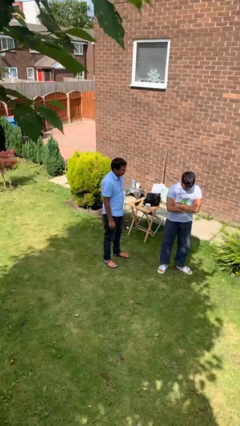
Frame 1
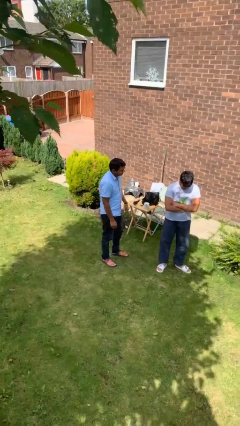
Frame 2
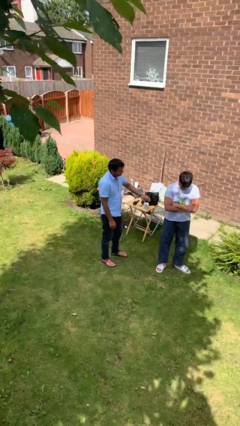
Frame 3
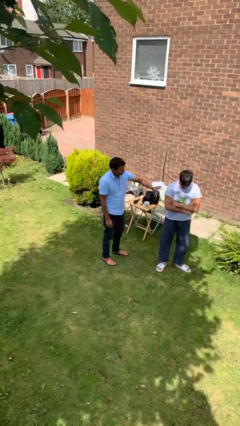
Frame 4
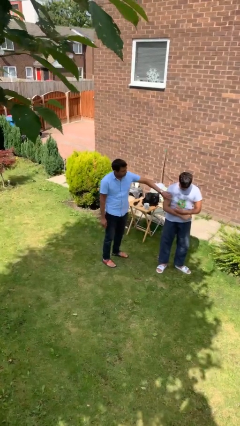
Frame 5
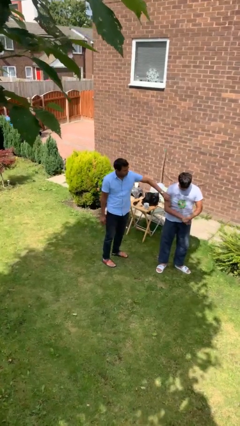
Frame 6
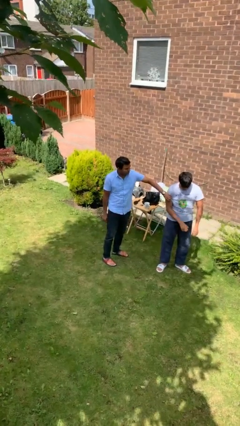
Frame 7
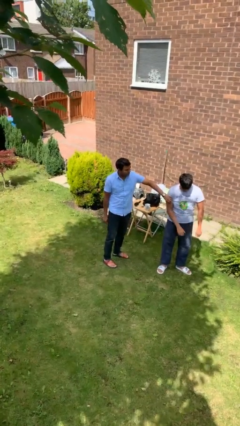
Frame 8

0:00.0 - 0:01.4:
person grabs person by bicep

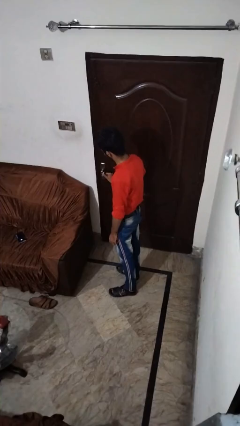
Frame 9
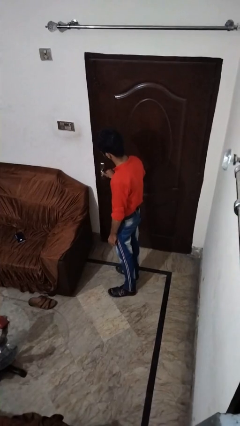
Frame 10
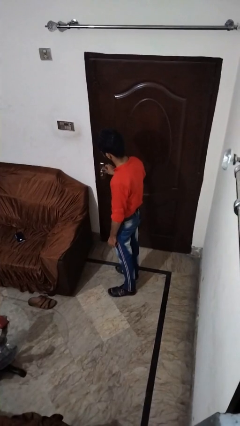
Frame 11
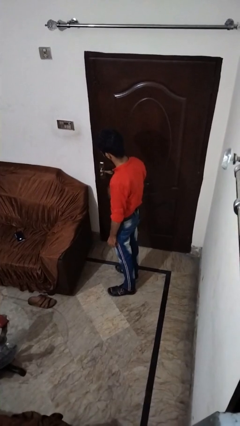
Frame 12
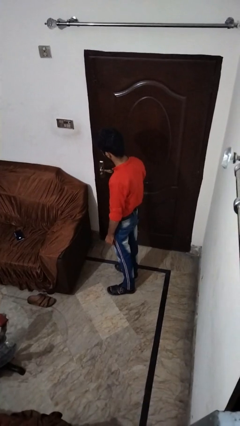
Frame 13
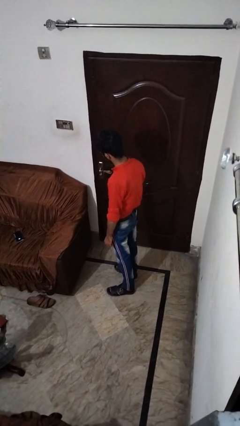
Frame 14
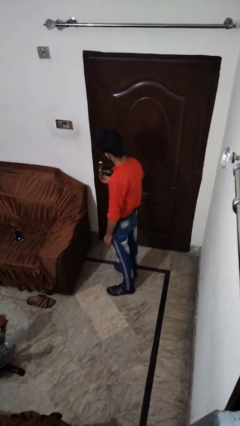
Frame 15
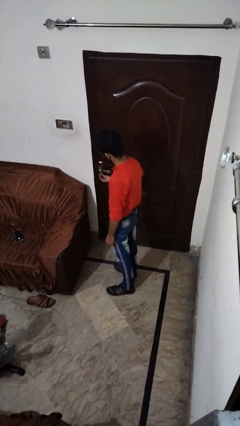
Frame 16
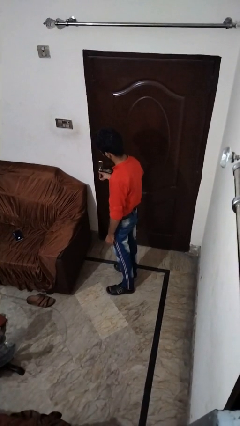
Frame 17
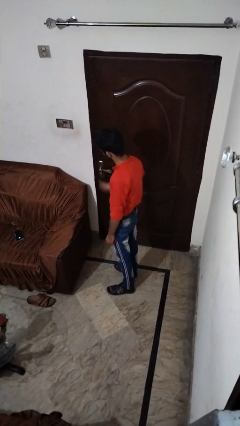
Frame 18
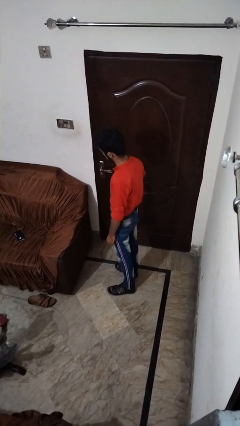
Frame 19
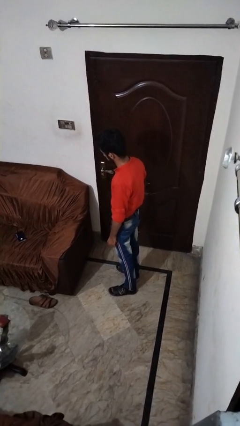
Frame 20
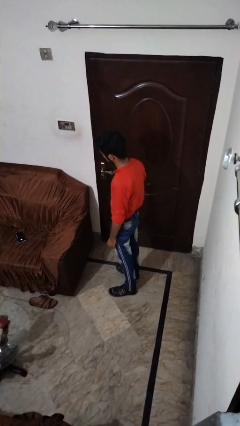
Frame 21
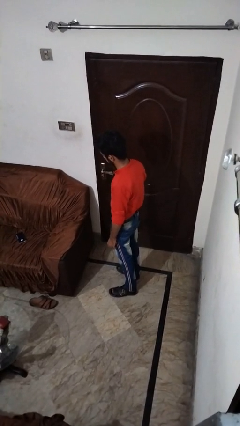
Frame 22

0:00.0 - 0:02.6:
person locks door with keys

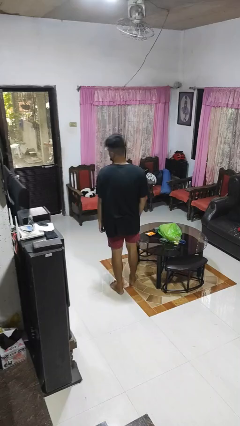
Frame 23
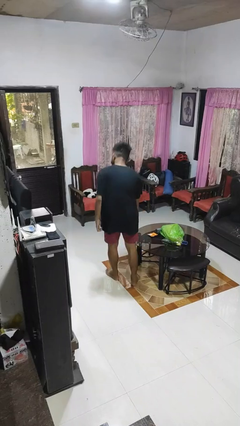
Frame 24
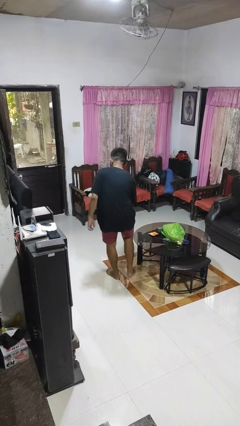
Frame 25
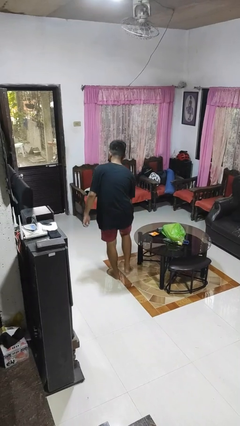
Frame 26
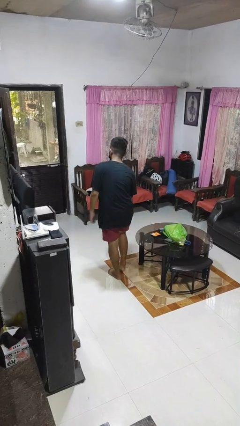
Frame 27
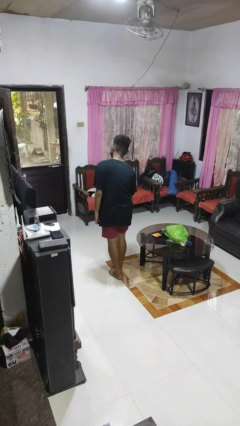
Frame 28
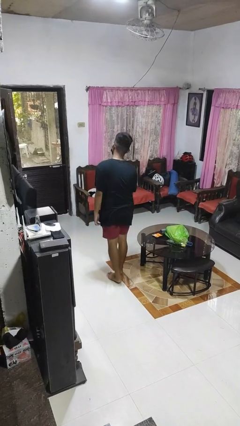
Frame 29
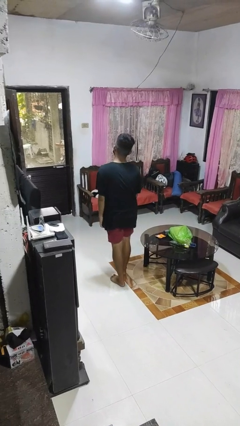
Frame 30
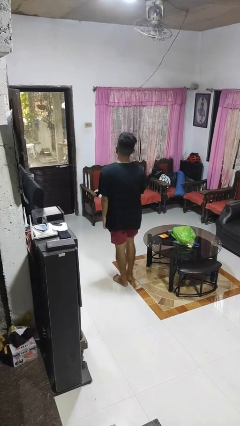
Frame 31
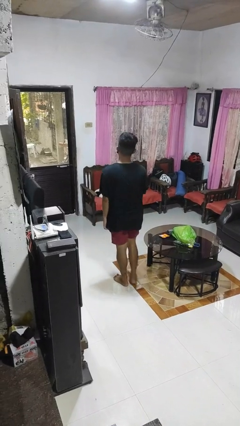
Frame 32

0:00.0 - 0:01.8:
person bumps into table

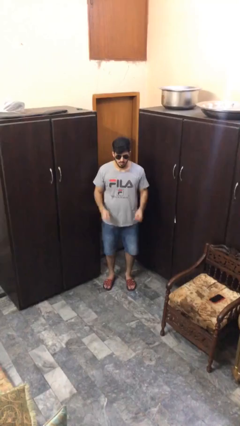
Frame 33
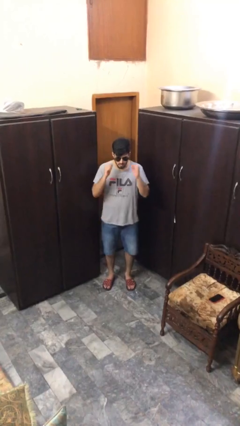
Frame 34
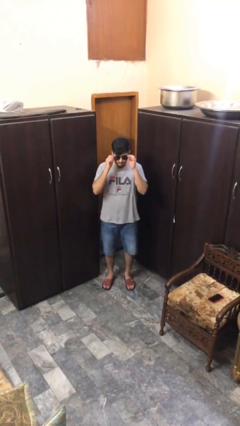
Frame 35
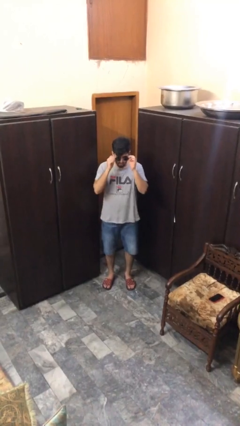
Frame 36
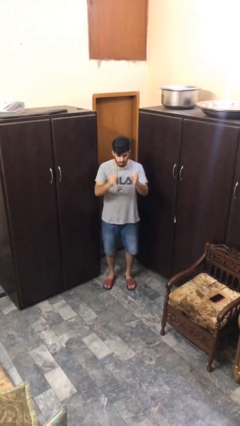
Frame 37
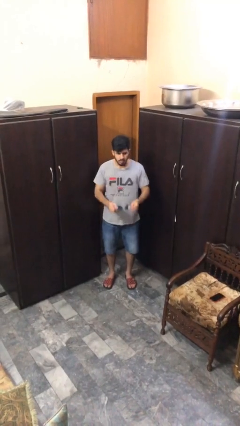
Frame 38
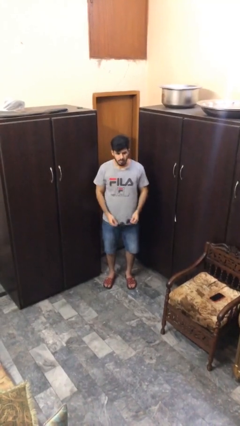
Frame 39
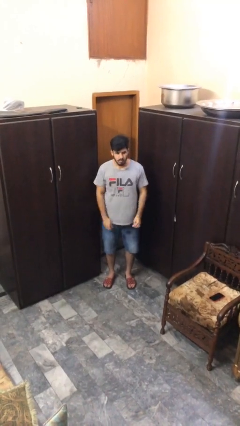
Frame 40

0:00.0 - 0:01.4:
person takes off sunglasses

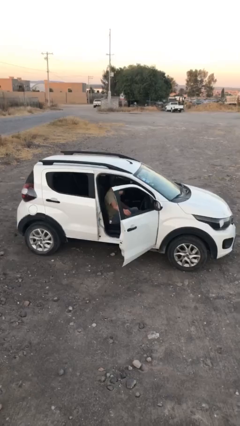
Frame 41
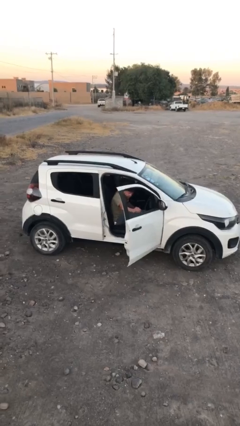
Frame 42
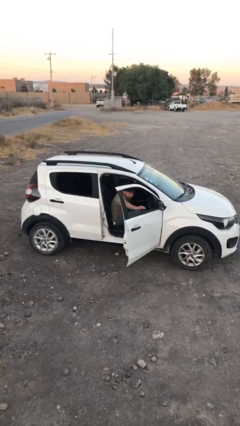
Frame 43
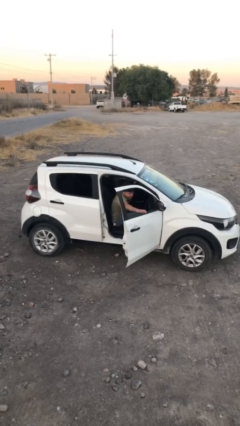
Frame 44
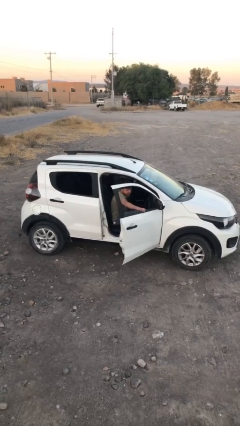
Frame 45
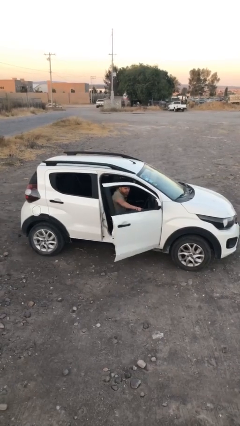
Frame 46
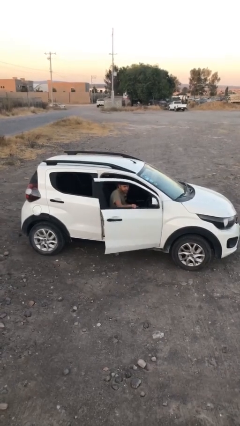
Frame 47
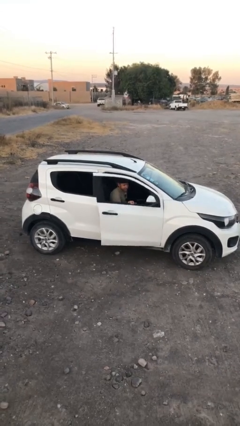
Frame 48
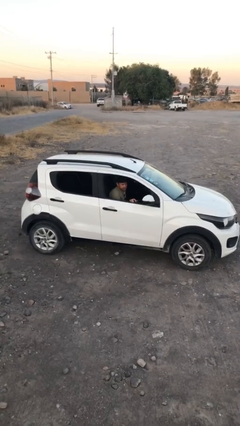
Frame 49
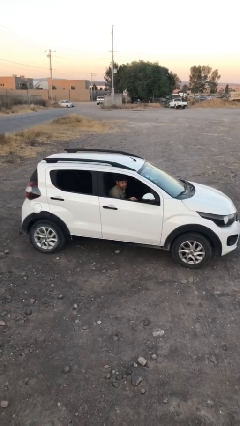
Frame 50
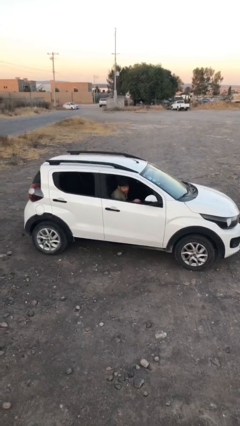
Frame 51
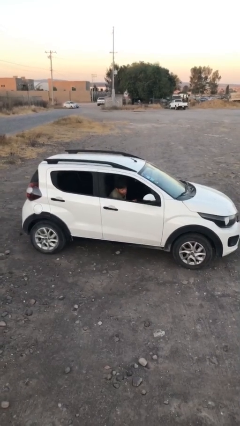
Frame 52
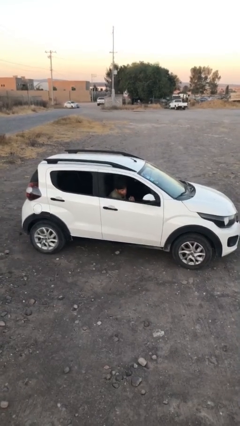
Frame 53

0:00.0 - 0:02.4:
person closes car door

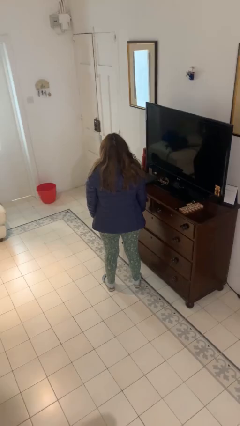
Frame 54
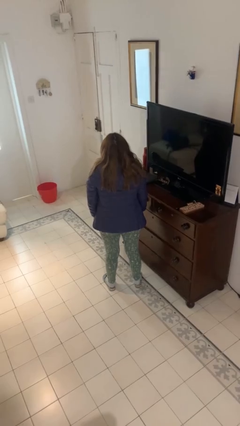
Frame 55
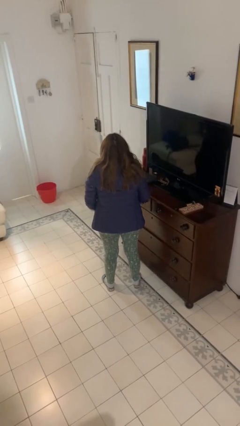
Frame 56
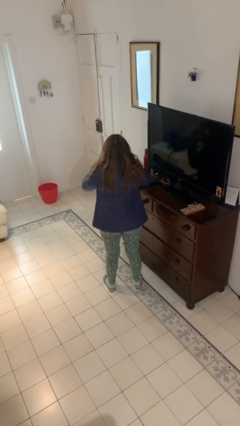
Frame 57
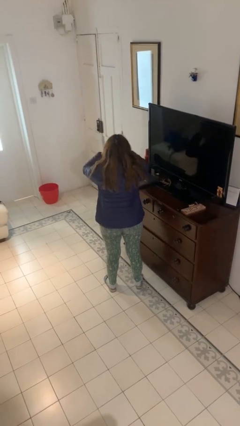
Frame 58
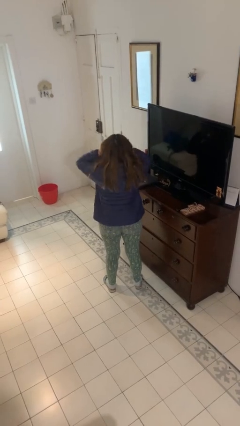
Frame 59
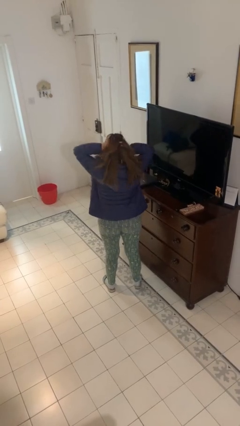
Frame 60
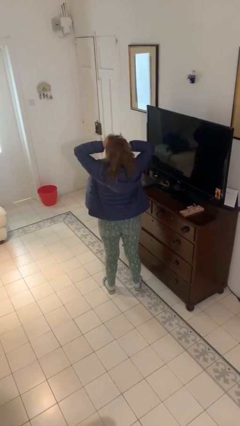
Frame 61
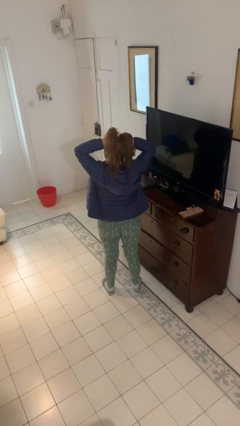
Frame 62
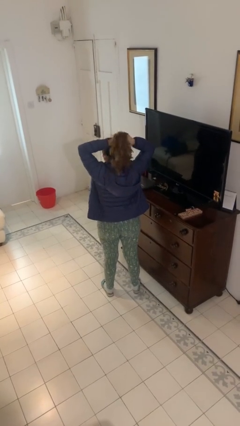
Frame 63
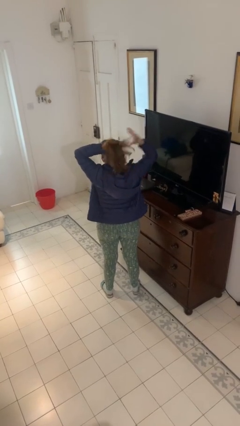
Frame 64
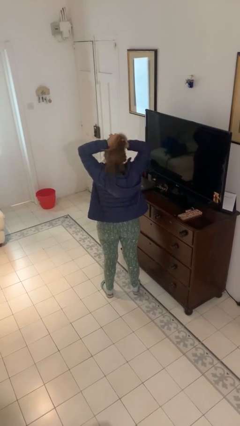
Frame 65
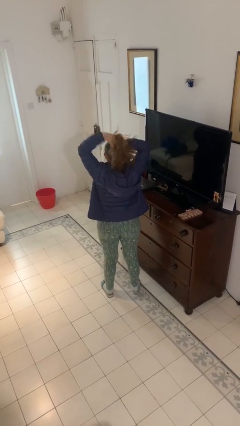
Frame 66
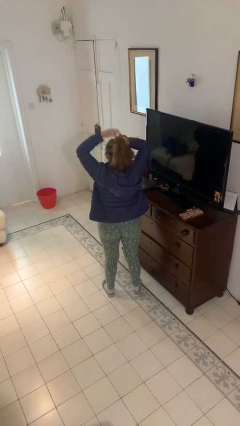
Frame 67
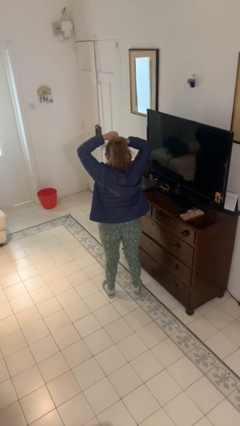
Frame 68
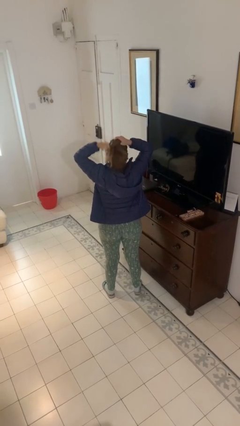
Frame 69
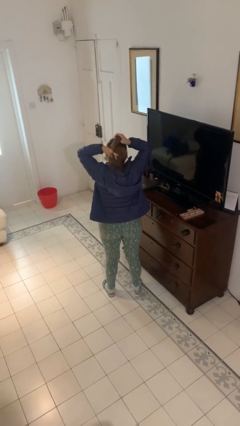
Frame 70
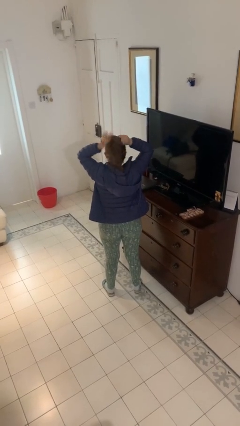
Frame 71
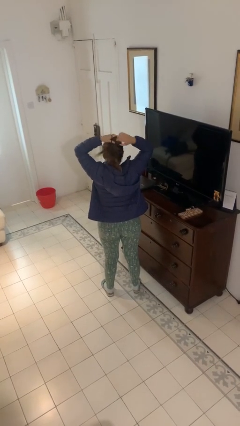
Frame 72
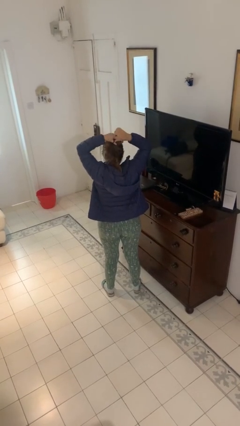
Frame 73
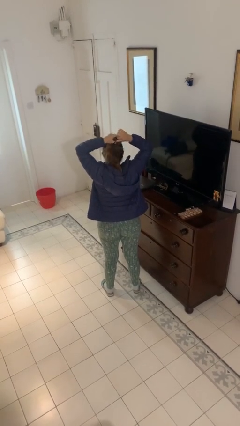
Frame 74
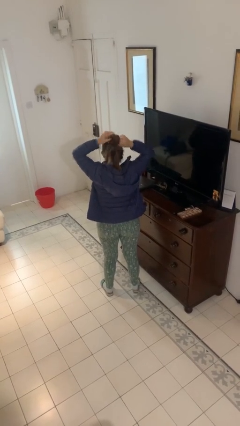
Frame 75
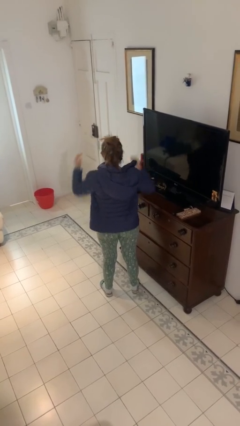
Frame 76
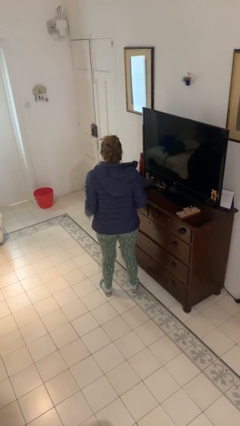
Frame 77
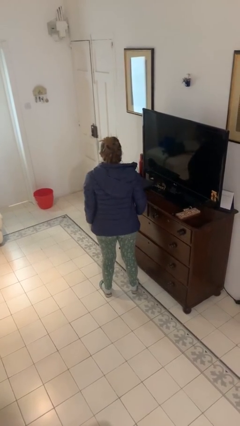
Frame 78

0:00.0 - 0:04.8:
person puts hair in ponytail

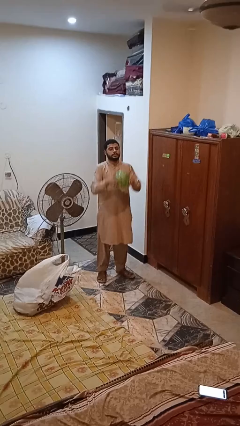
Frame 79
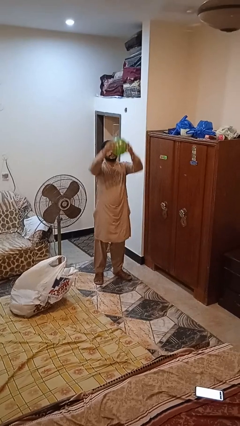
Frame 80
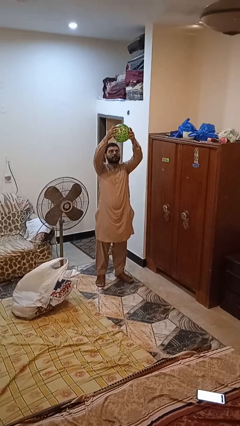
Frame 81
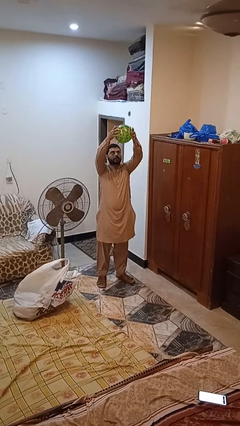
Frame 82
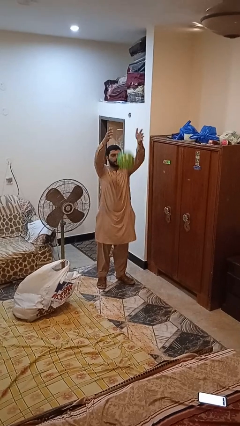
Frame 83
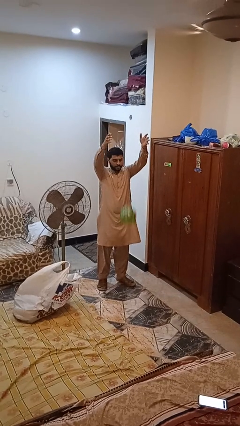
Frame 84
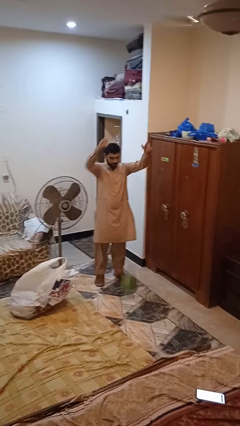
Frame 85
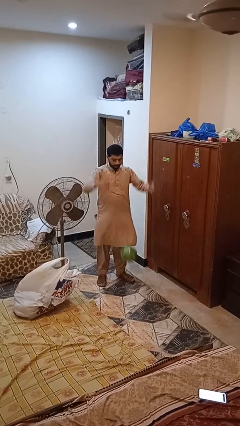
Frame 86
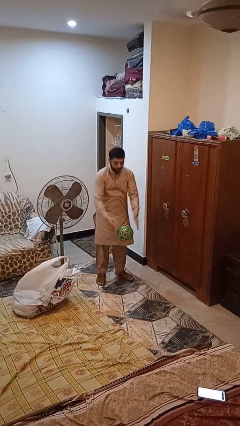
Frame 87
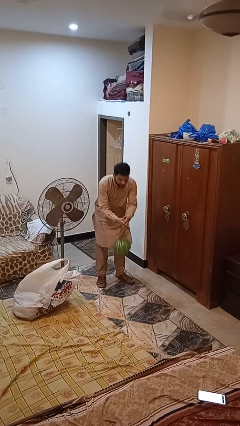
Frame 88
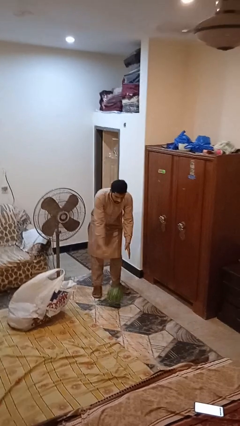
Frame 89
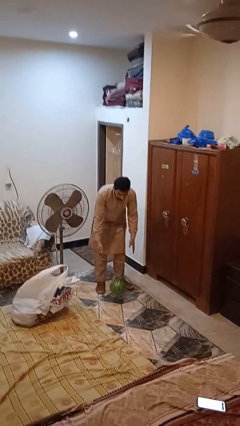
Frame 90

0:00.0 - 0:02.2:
person drops object

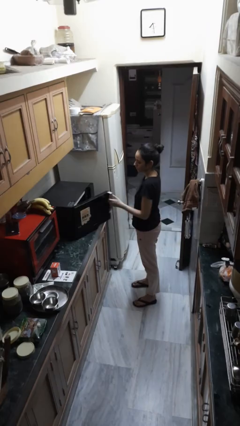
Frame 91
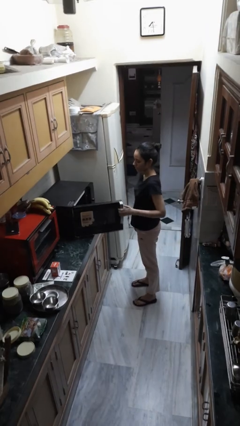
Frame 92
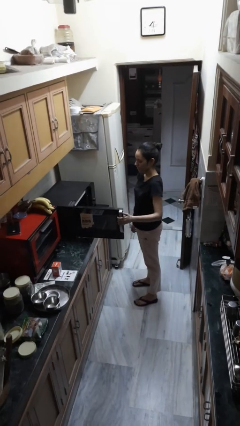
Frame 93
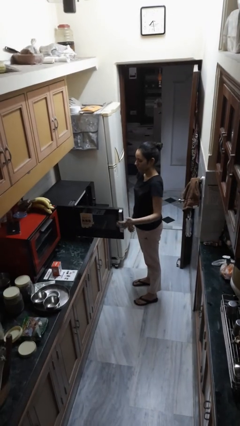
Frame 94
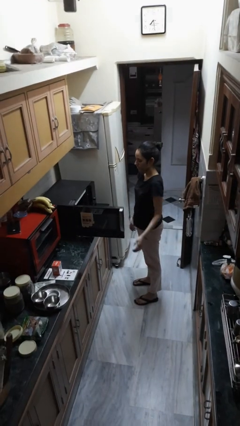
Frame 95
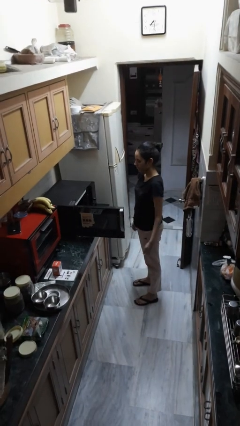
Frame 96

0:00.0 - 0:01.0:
person opens oven door
